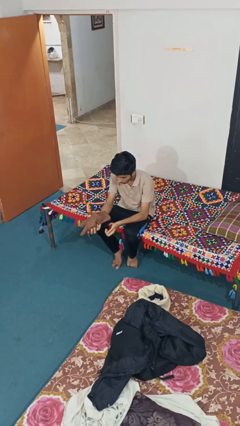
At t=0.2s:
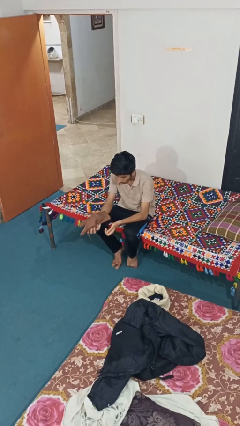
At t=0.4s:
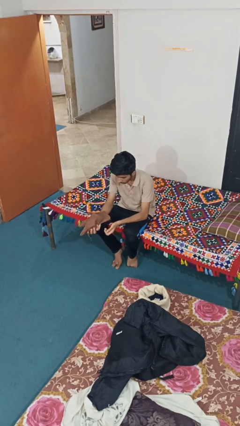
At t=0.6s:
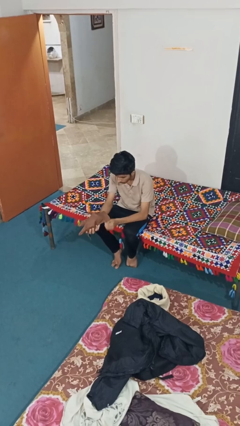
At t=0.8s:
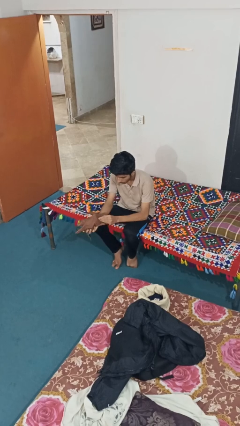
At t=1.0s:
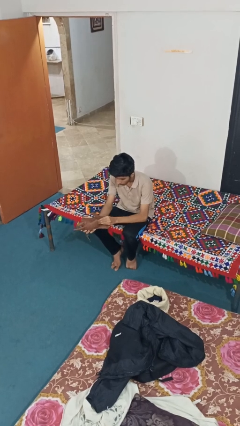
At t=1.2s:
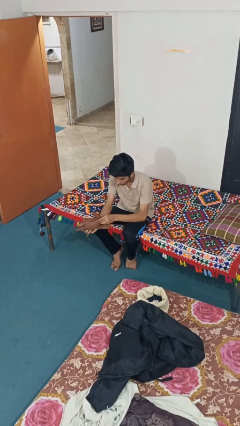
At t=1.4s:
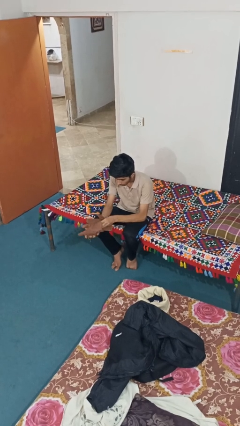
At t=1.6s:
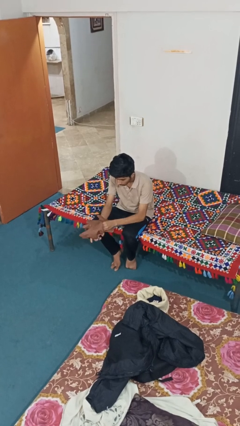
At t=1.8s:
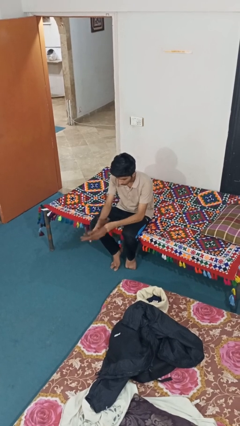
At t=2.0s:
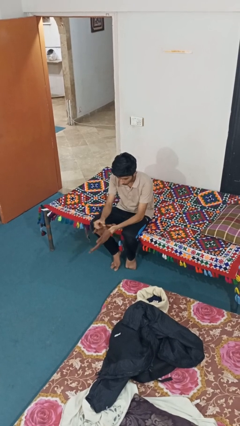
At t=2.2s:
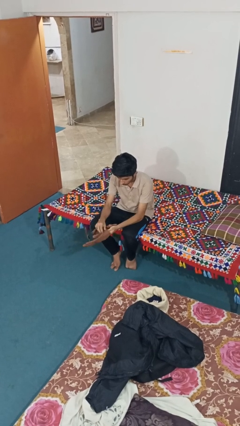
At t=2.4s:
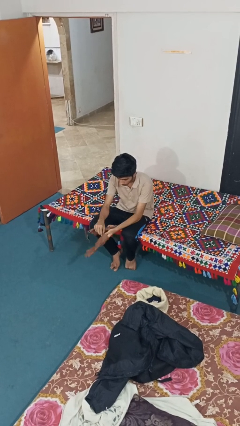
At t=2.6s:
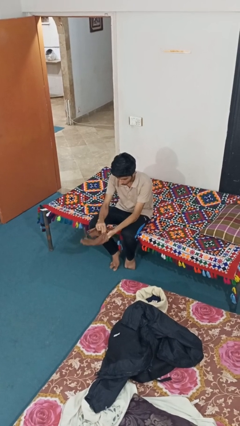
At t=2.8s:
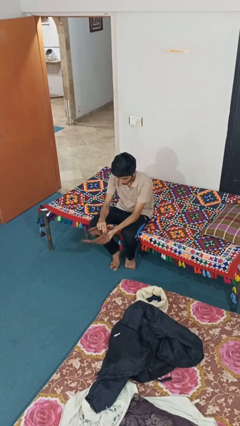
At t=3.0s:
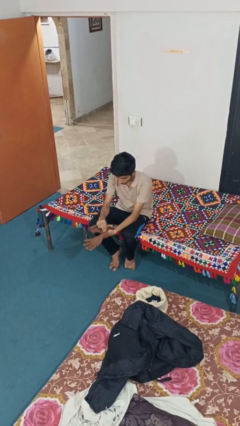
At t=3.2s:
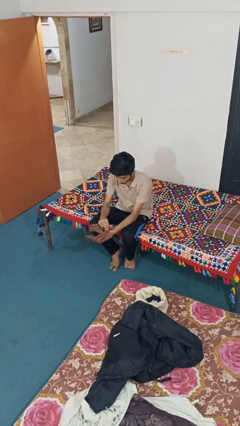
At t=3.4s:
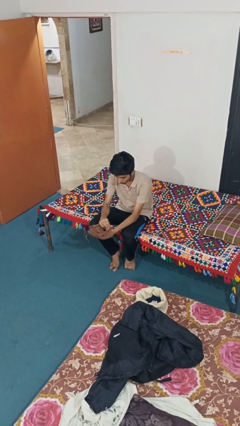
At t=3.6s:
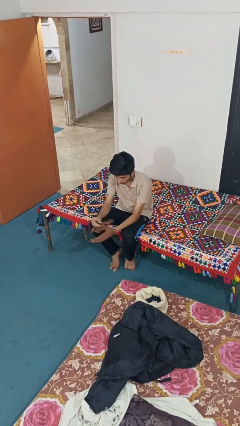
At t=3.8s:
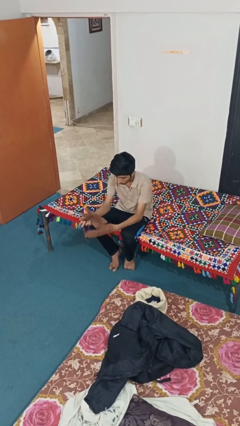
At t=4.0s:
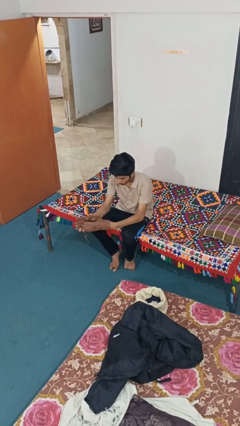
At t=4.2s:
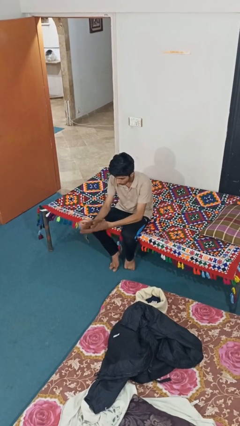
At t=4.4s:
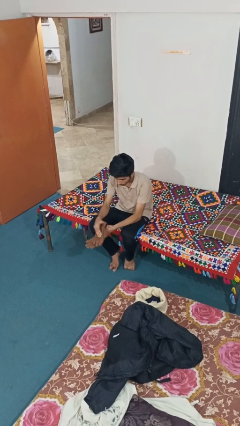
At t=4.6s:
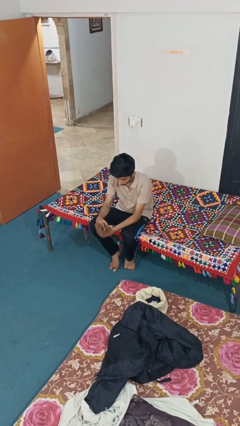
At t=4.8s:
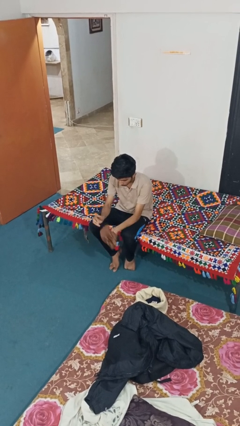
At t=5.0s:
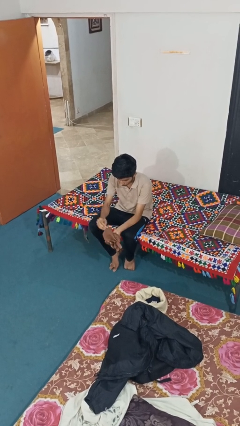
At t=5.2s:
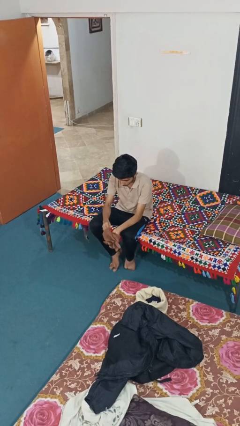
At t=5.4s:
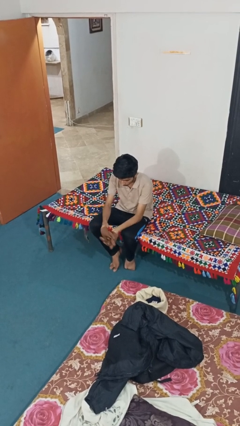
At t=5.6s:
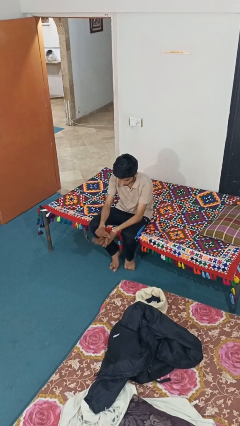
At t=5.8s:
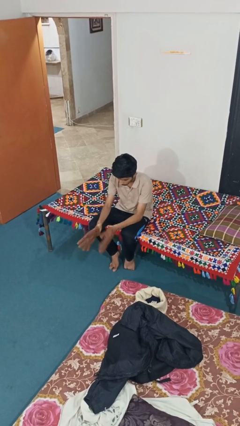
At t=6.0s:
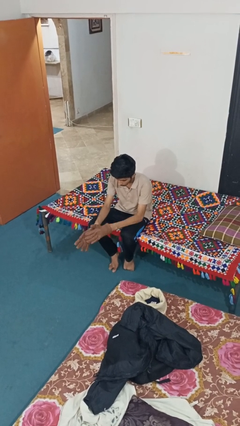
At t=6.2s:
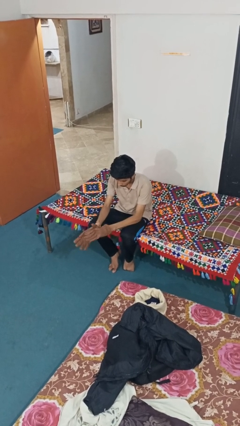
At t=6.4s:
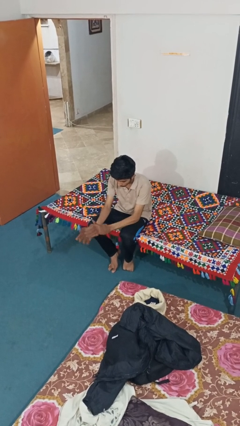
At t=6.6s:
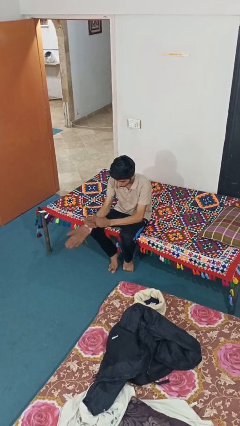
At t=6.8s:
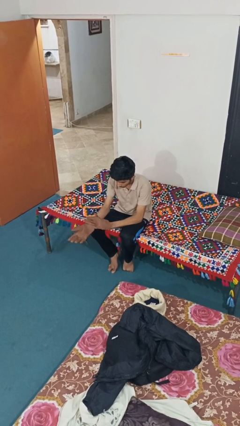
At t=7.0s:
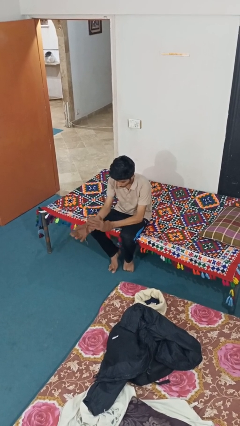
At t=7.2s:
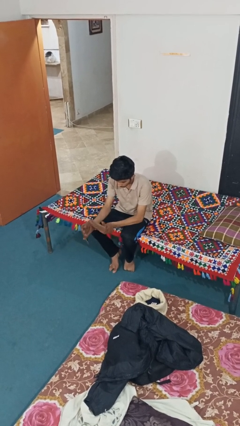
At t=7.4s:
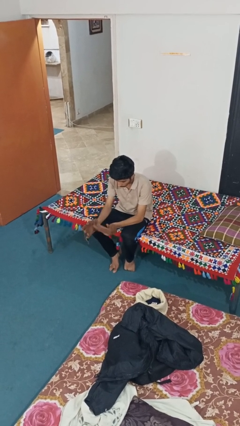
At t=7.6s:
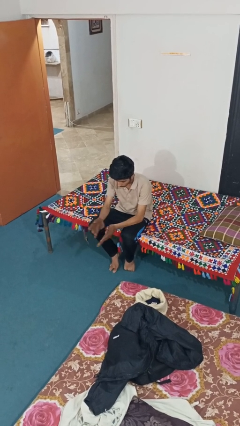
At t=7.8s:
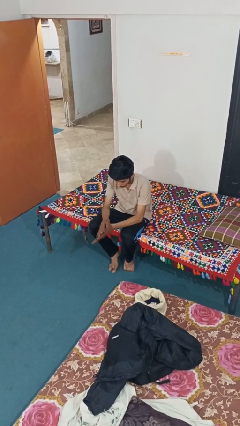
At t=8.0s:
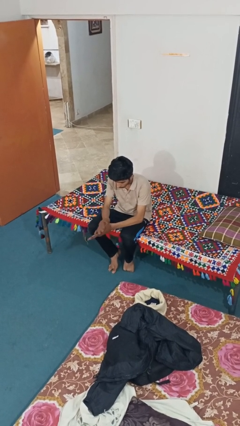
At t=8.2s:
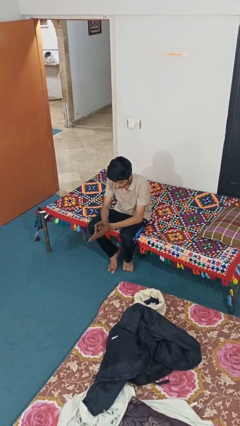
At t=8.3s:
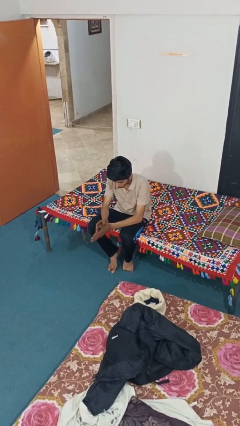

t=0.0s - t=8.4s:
person puts on gloves

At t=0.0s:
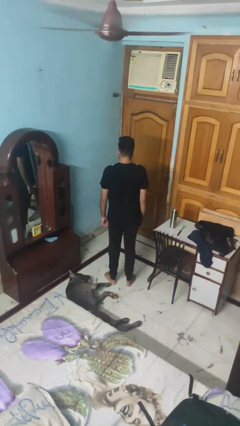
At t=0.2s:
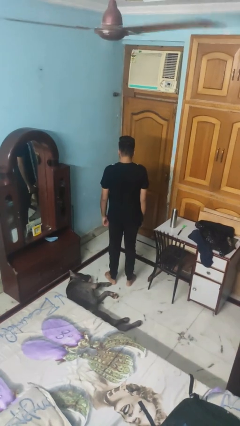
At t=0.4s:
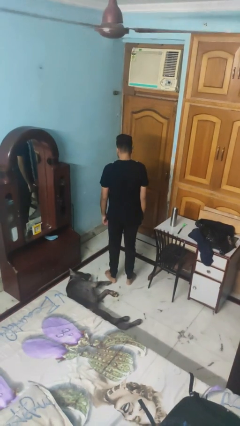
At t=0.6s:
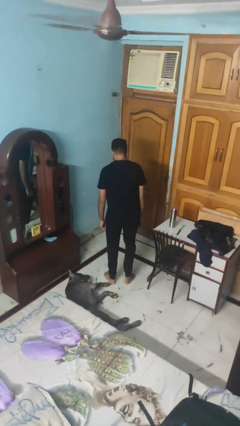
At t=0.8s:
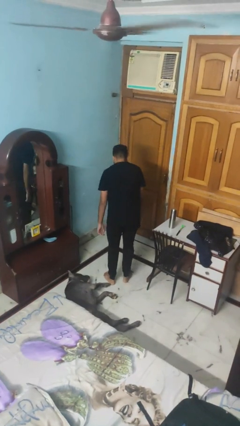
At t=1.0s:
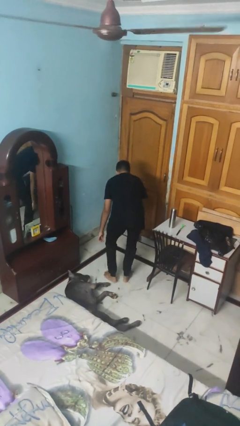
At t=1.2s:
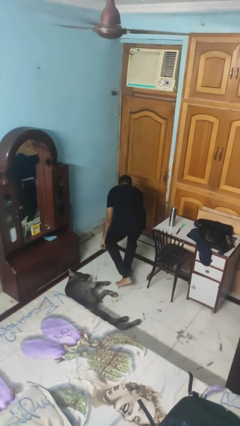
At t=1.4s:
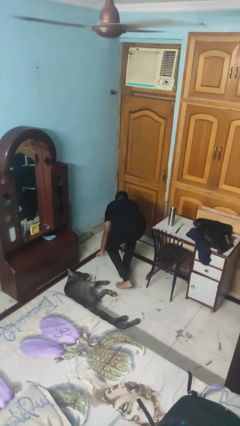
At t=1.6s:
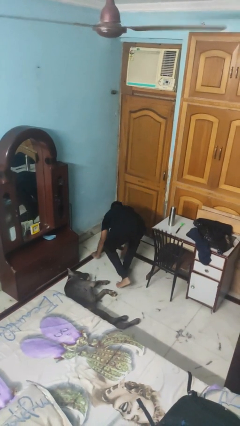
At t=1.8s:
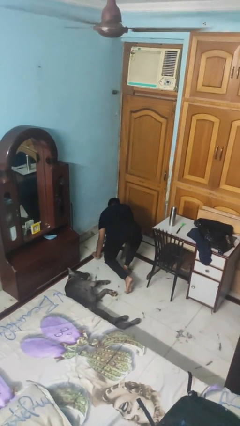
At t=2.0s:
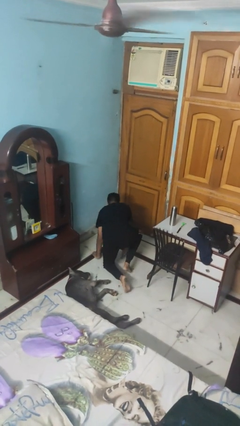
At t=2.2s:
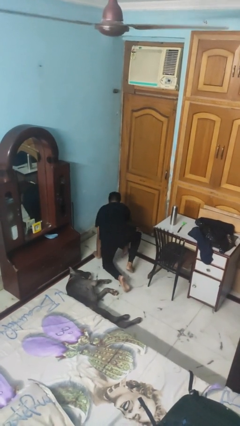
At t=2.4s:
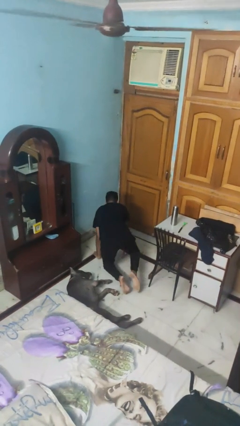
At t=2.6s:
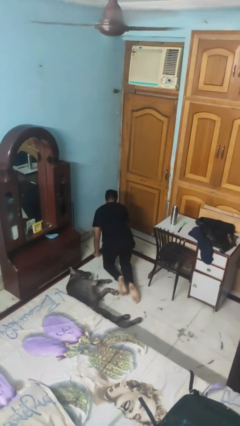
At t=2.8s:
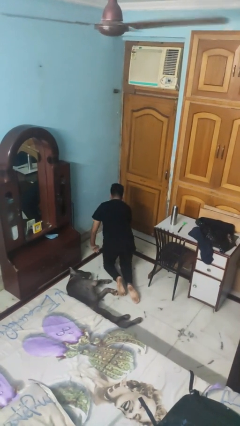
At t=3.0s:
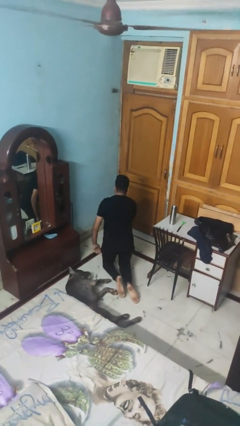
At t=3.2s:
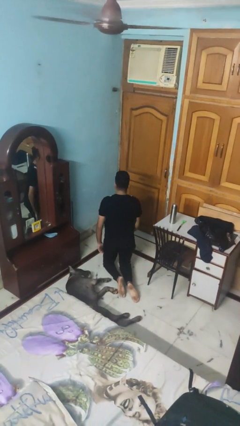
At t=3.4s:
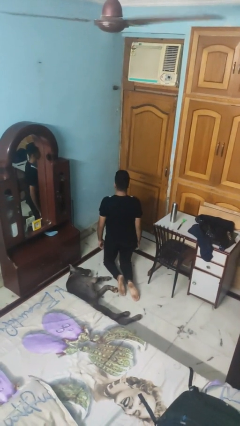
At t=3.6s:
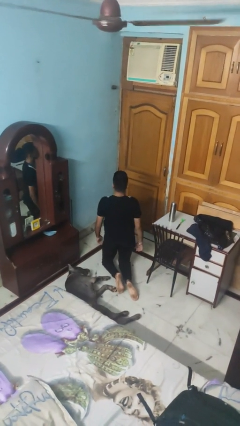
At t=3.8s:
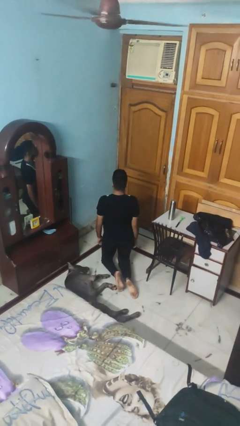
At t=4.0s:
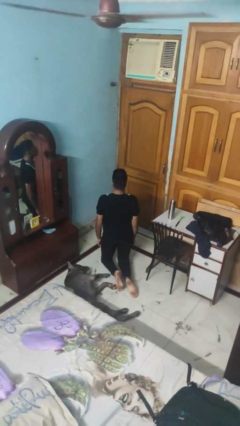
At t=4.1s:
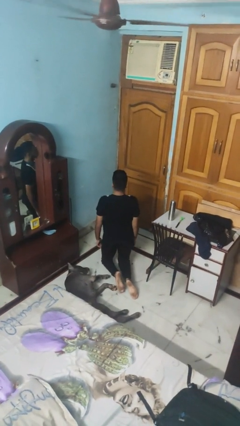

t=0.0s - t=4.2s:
person kneels

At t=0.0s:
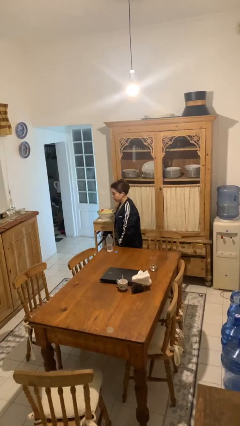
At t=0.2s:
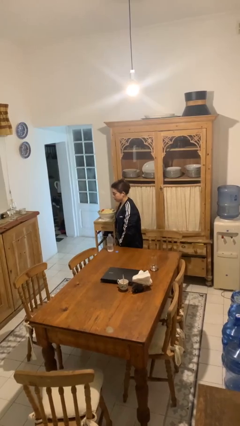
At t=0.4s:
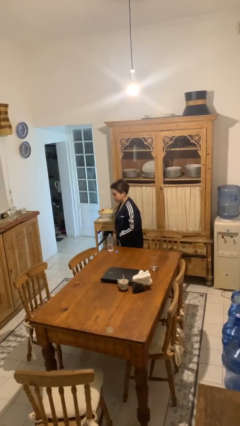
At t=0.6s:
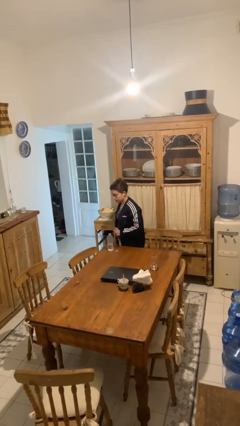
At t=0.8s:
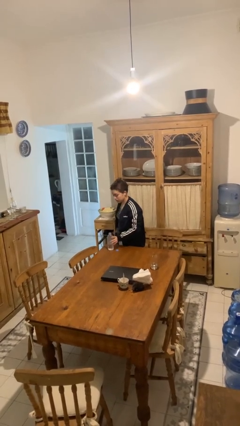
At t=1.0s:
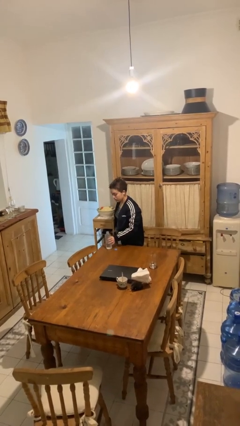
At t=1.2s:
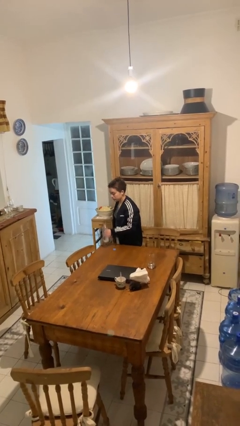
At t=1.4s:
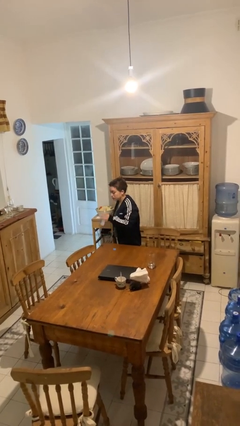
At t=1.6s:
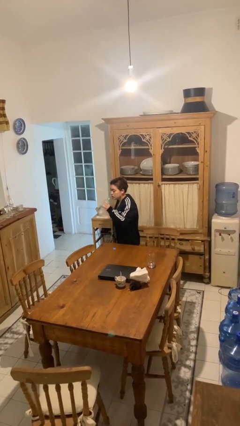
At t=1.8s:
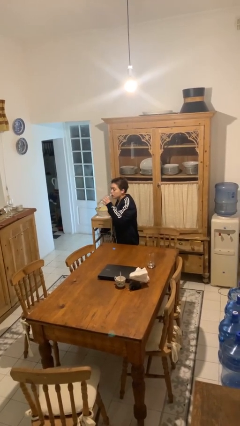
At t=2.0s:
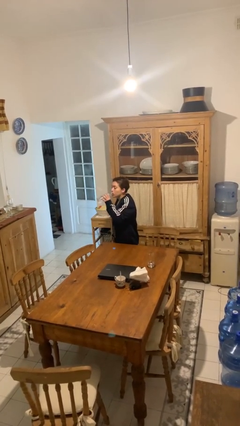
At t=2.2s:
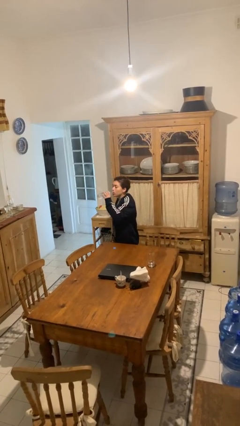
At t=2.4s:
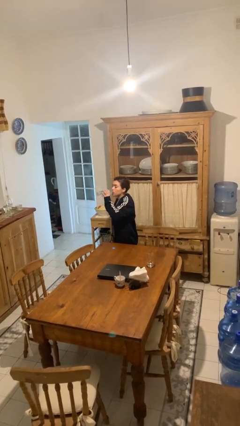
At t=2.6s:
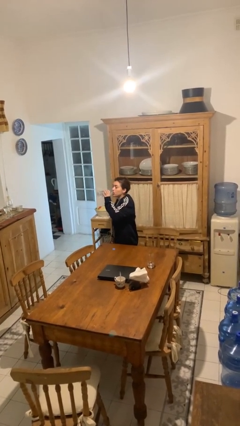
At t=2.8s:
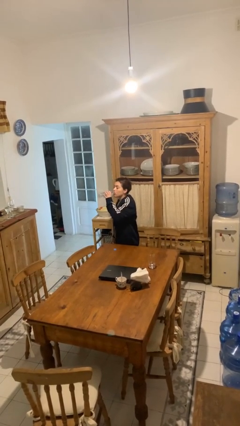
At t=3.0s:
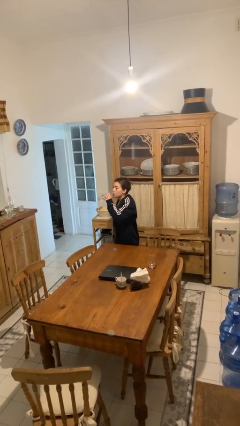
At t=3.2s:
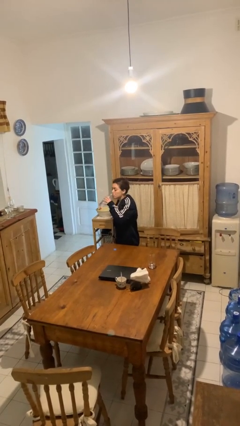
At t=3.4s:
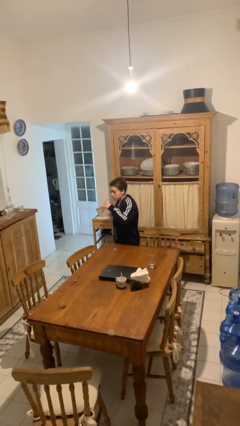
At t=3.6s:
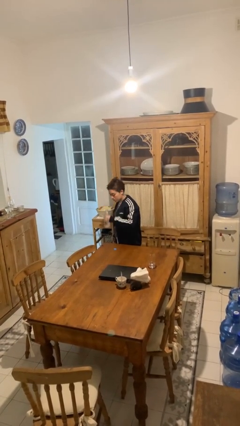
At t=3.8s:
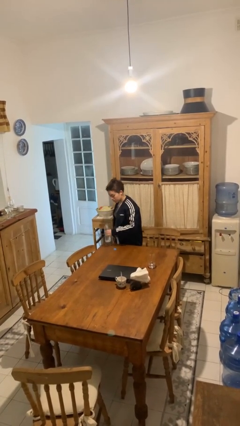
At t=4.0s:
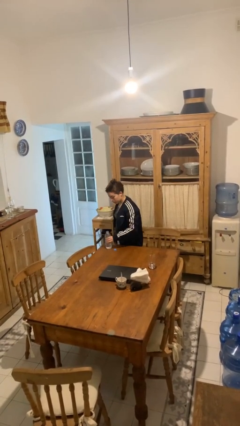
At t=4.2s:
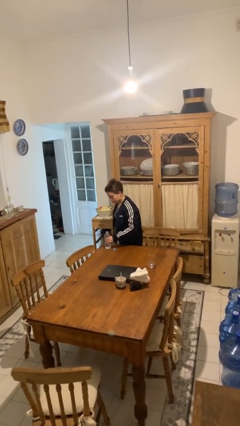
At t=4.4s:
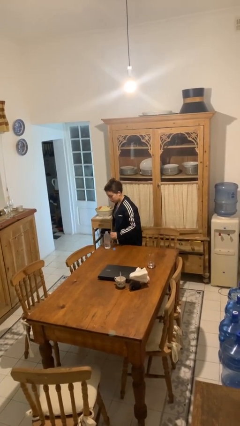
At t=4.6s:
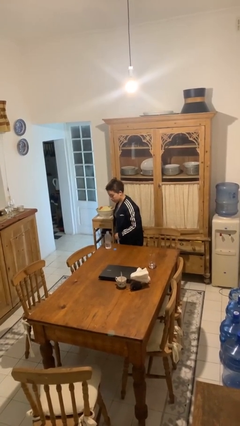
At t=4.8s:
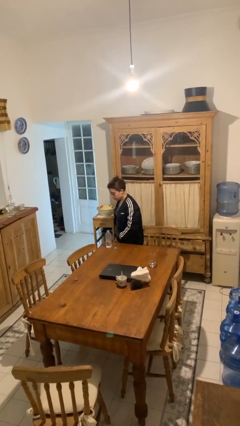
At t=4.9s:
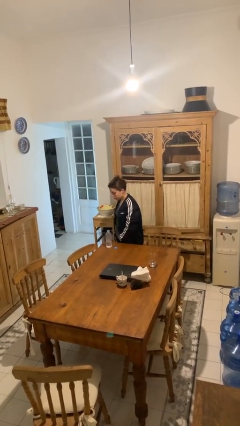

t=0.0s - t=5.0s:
person drinks from bottle
